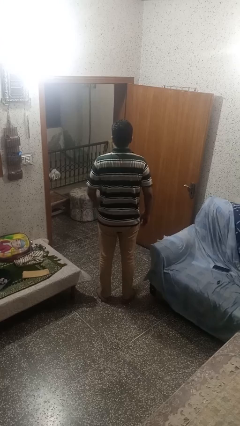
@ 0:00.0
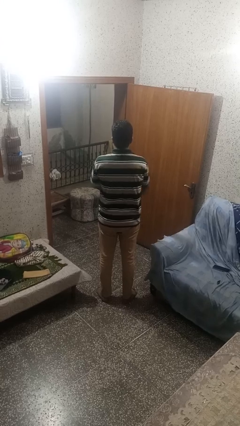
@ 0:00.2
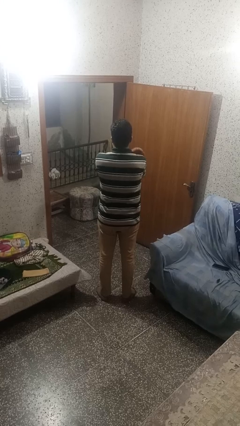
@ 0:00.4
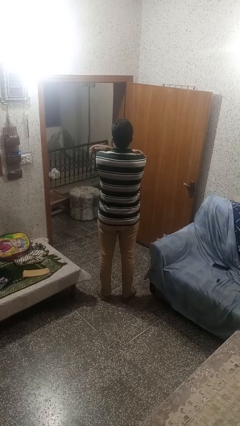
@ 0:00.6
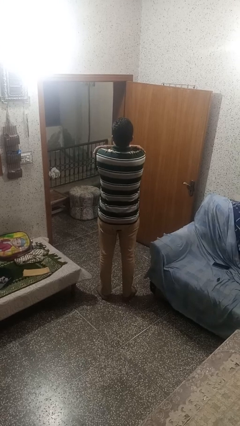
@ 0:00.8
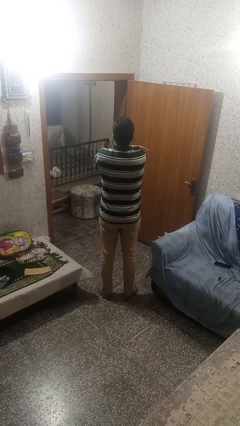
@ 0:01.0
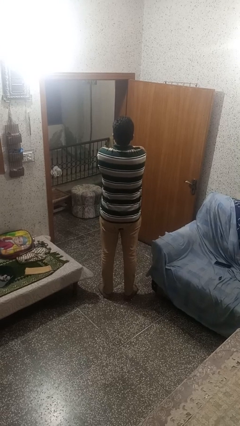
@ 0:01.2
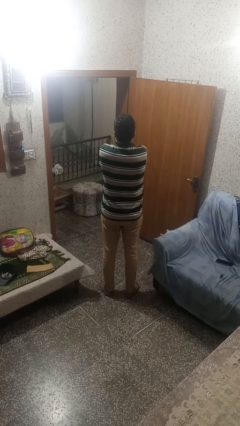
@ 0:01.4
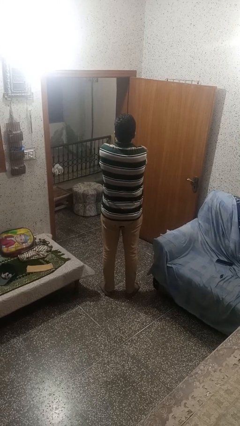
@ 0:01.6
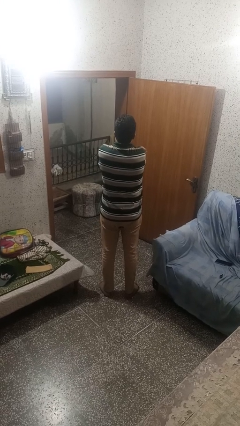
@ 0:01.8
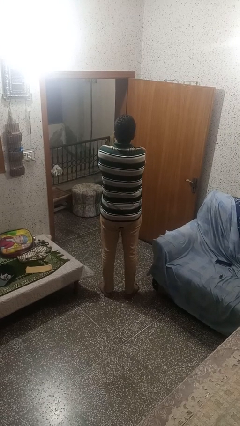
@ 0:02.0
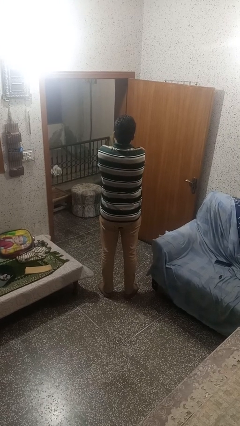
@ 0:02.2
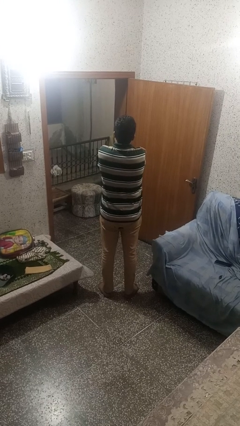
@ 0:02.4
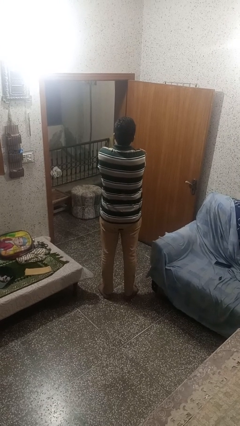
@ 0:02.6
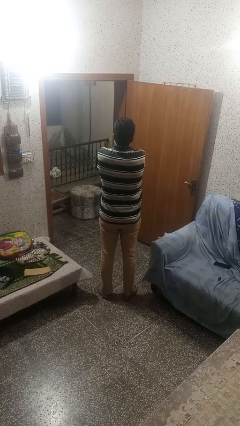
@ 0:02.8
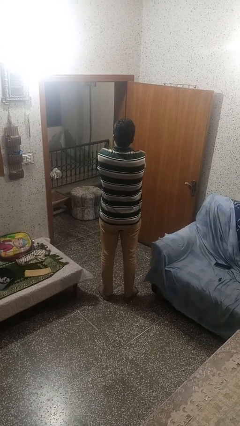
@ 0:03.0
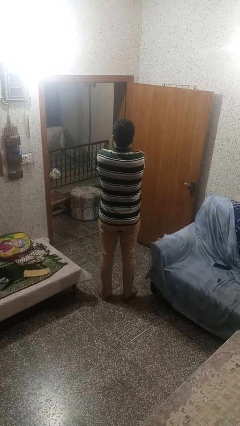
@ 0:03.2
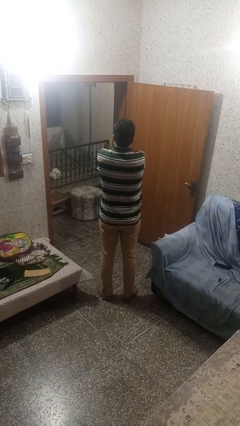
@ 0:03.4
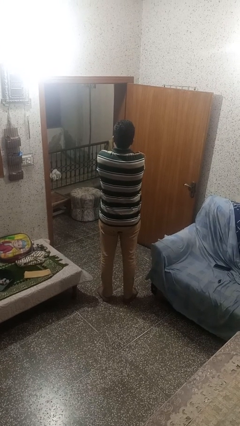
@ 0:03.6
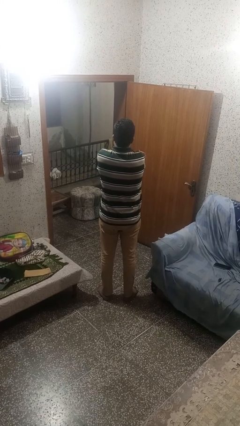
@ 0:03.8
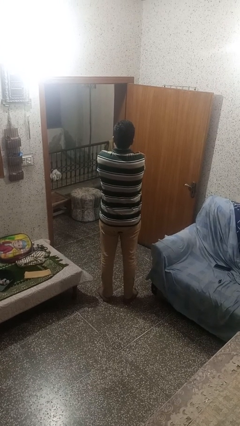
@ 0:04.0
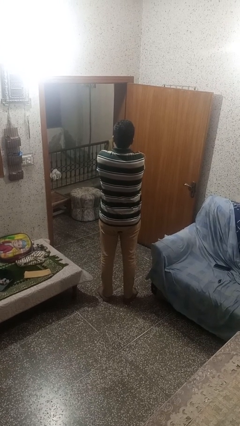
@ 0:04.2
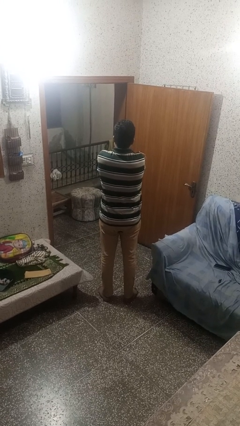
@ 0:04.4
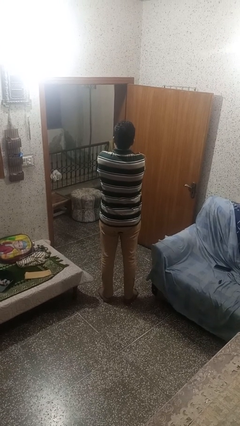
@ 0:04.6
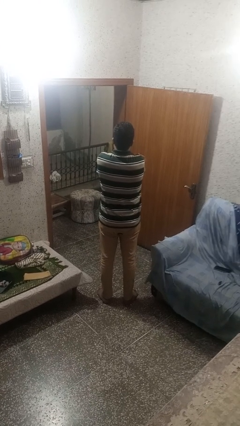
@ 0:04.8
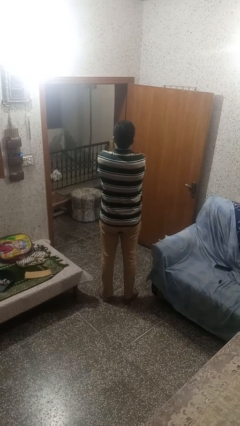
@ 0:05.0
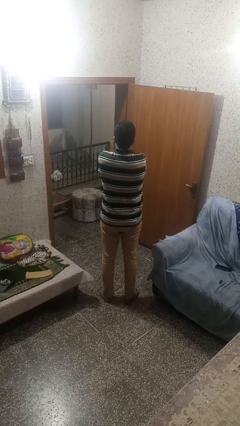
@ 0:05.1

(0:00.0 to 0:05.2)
person crosses arms

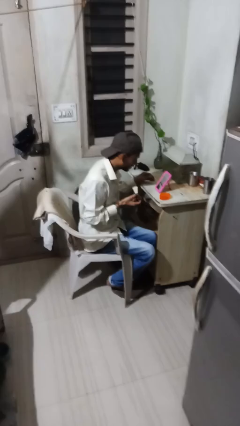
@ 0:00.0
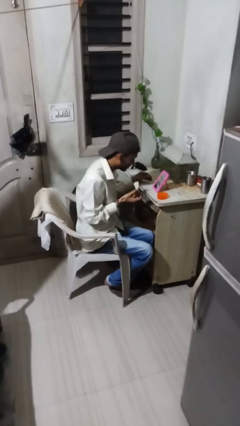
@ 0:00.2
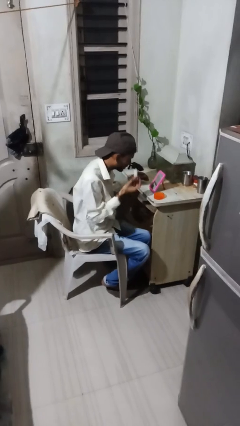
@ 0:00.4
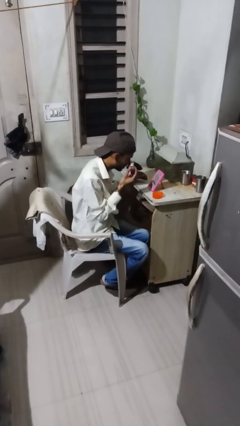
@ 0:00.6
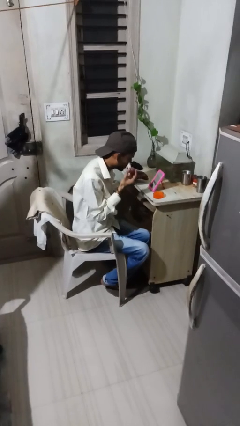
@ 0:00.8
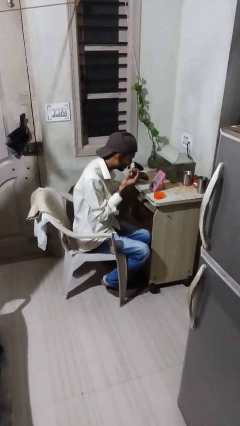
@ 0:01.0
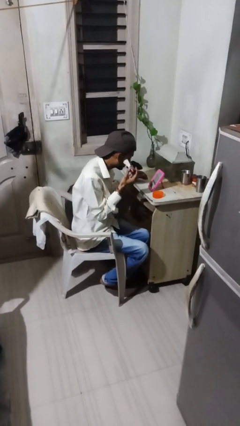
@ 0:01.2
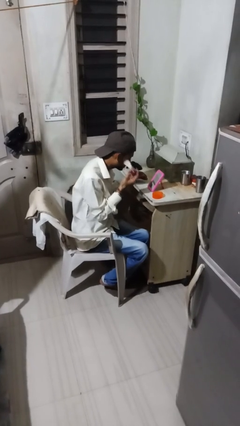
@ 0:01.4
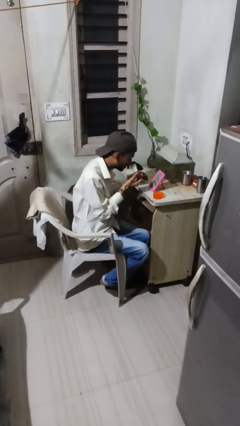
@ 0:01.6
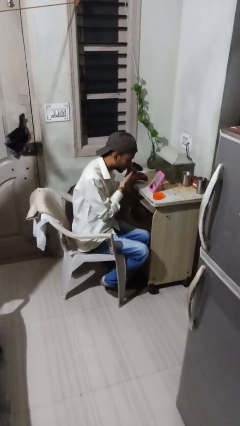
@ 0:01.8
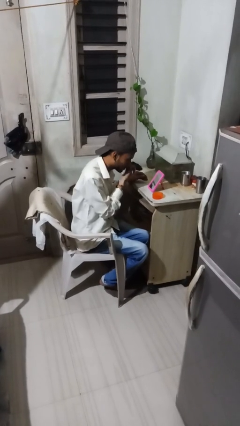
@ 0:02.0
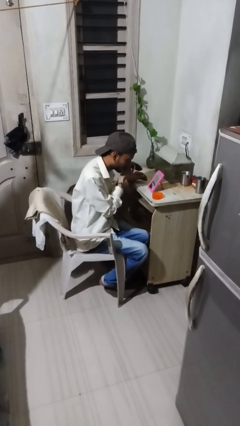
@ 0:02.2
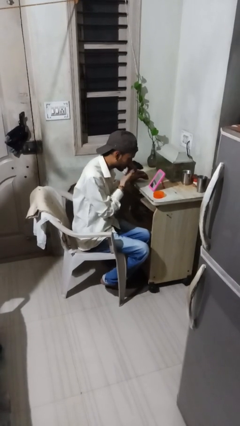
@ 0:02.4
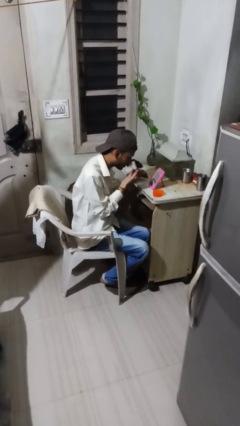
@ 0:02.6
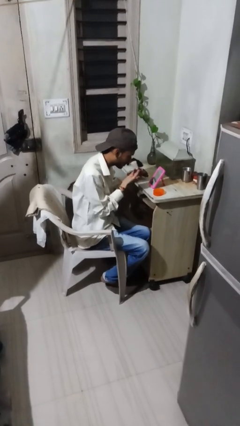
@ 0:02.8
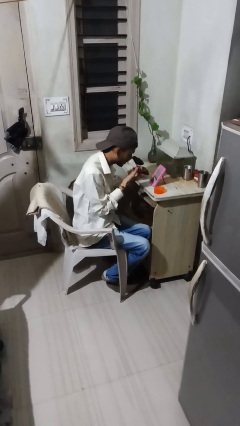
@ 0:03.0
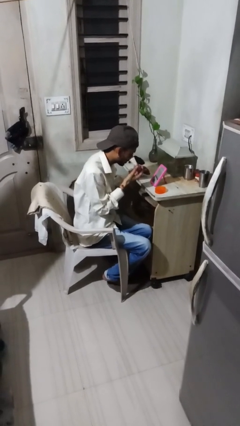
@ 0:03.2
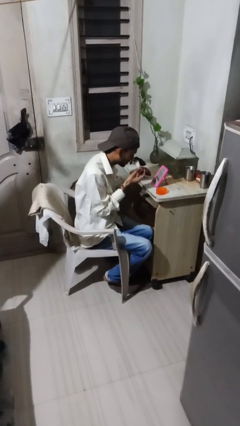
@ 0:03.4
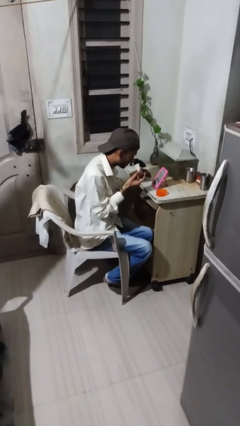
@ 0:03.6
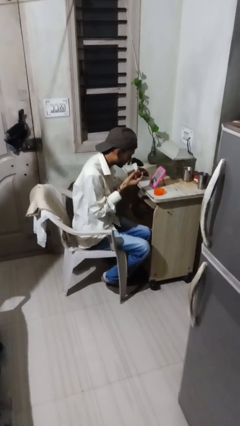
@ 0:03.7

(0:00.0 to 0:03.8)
person applies foundation makeup

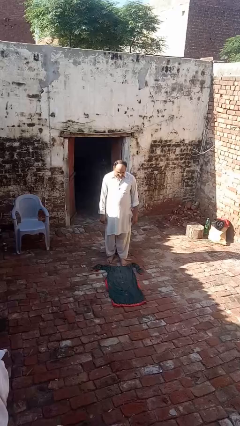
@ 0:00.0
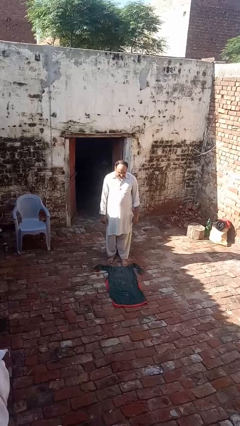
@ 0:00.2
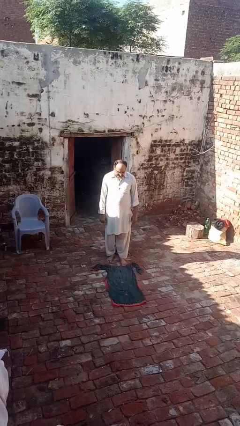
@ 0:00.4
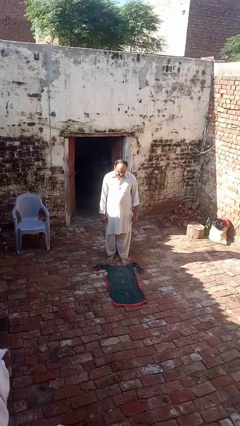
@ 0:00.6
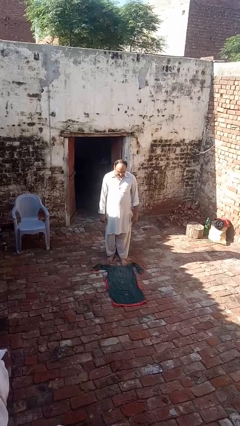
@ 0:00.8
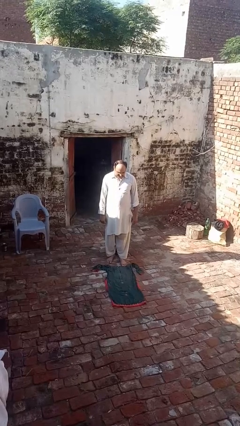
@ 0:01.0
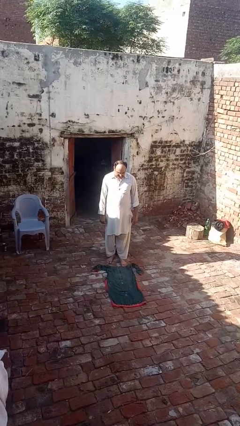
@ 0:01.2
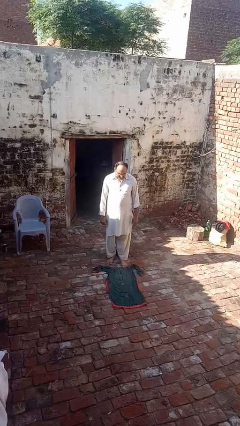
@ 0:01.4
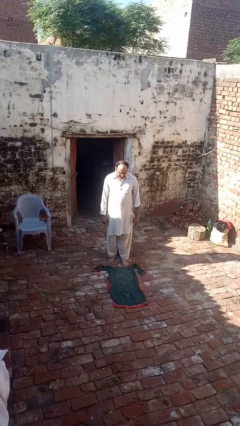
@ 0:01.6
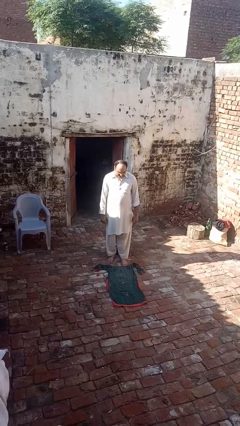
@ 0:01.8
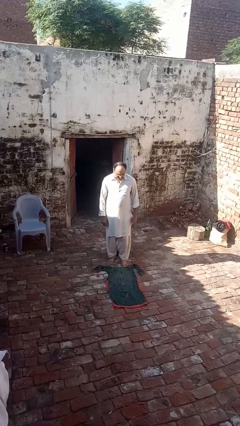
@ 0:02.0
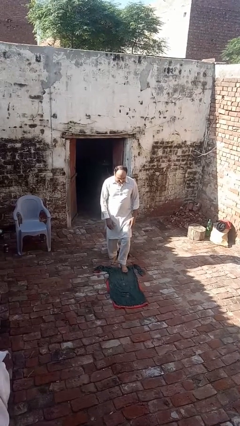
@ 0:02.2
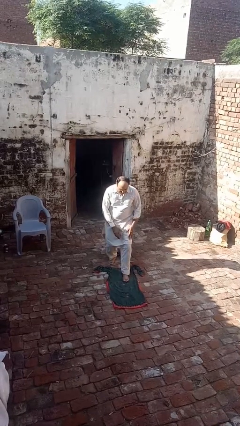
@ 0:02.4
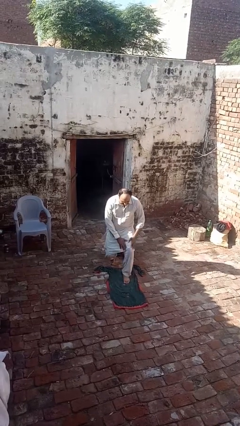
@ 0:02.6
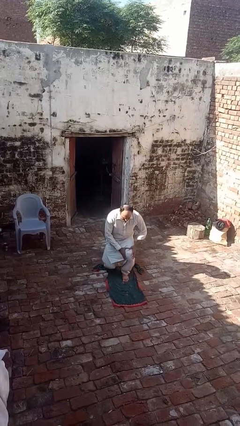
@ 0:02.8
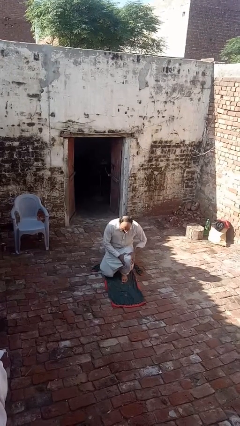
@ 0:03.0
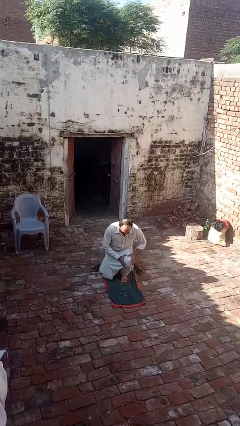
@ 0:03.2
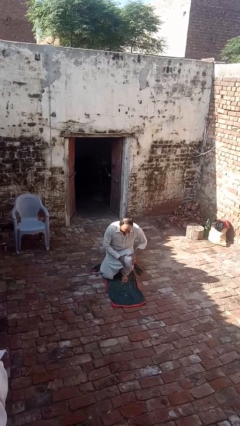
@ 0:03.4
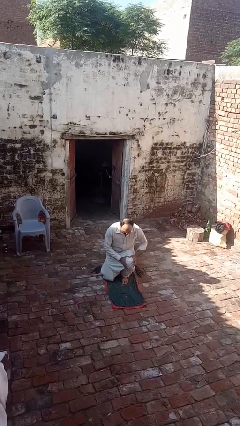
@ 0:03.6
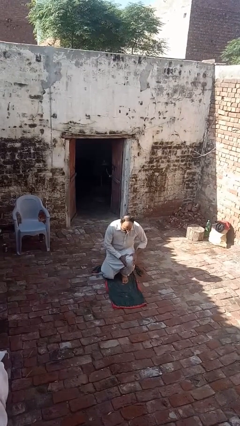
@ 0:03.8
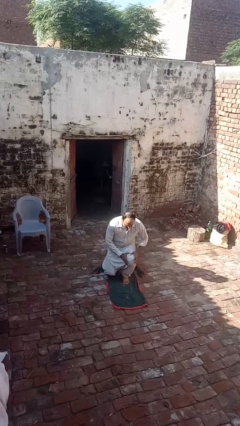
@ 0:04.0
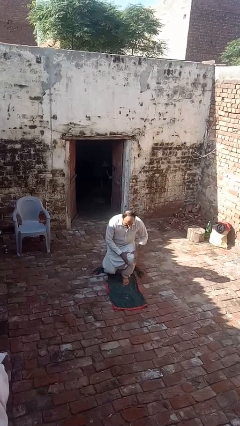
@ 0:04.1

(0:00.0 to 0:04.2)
person exercises with lunges

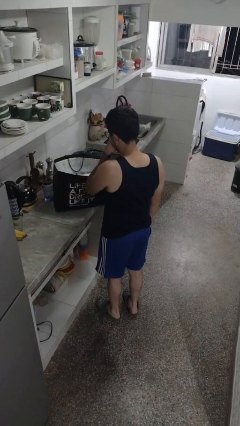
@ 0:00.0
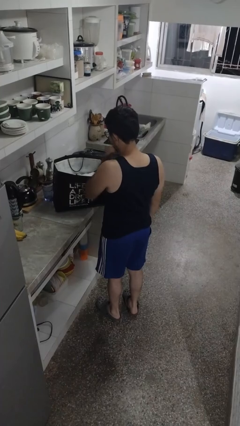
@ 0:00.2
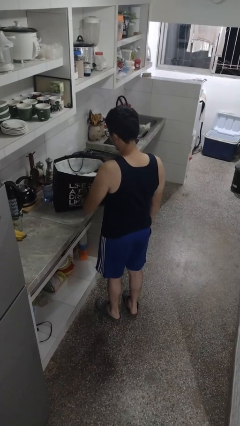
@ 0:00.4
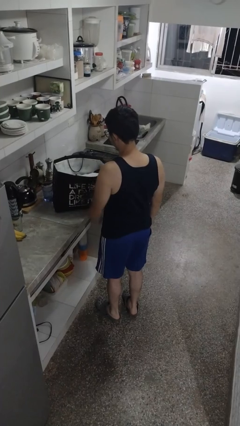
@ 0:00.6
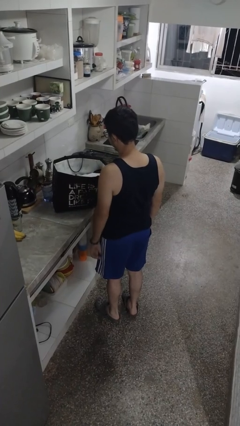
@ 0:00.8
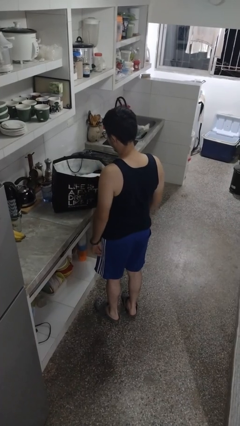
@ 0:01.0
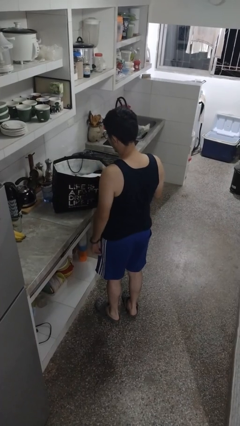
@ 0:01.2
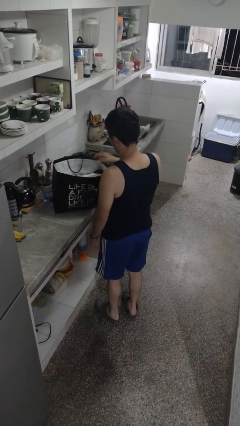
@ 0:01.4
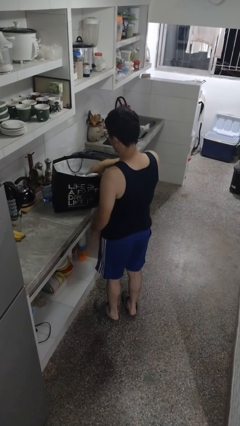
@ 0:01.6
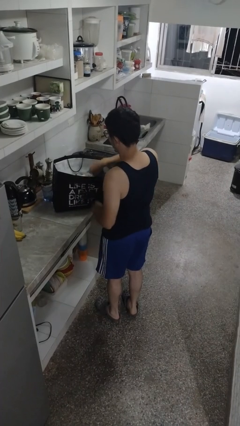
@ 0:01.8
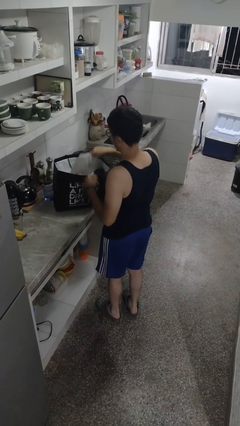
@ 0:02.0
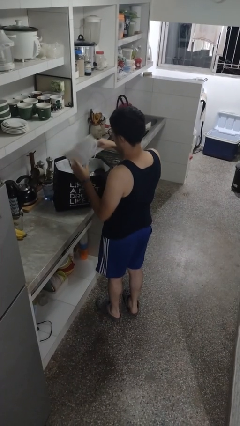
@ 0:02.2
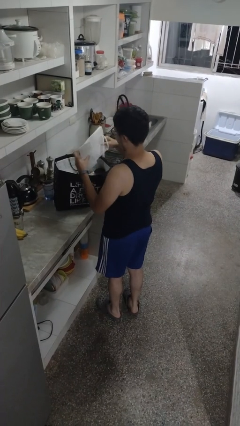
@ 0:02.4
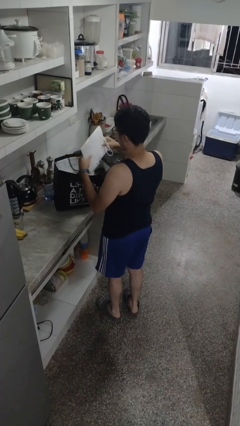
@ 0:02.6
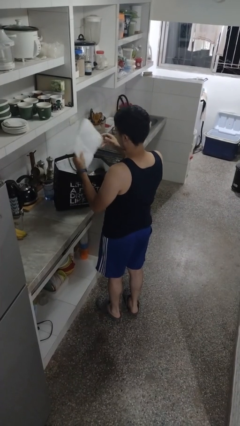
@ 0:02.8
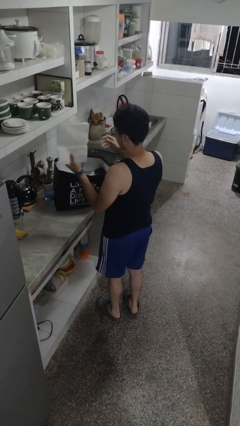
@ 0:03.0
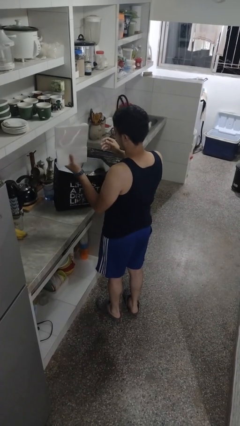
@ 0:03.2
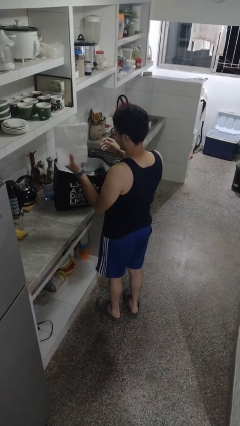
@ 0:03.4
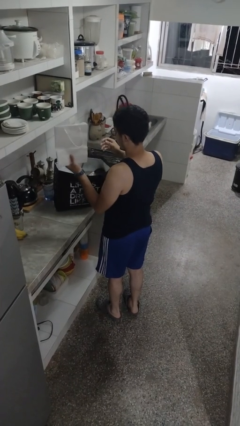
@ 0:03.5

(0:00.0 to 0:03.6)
person takes object from bag

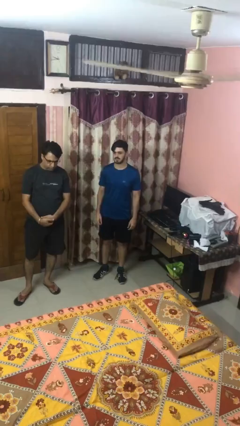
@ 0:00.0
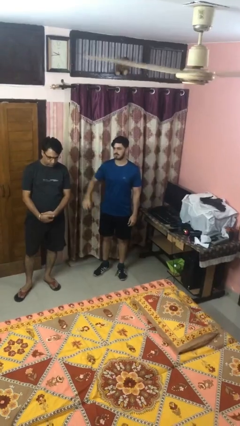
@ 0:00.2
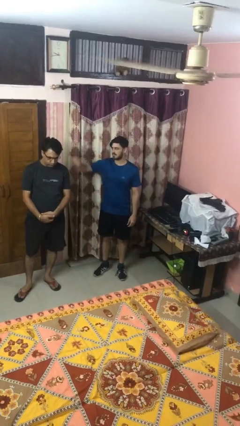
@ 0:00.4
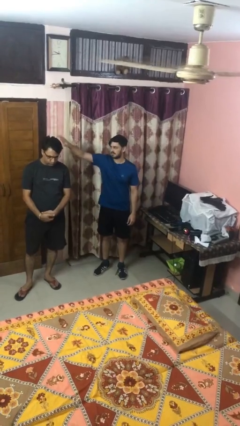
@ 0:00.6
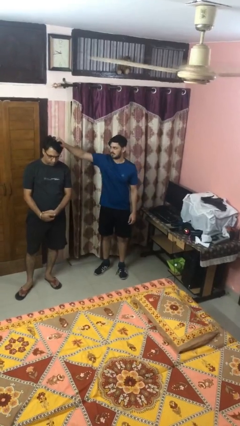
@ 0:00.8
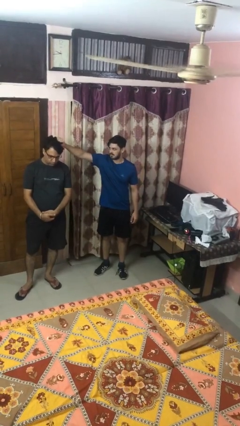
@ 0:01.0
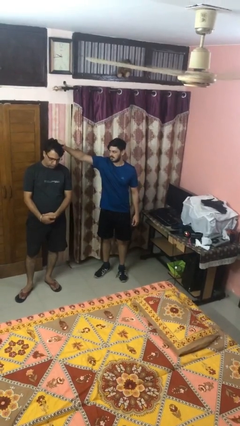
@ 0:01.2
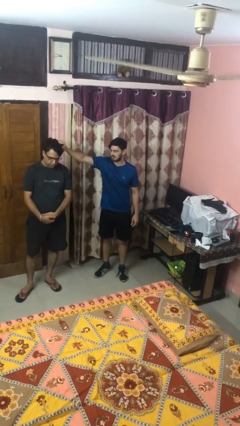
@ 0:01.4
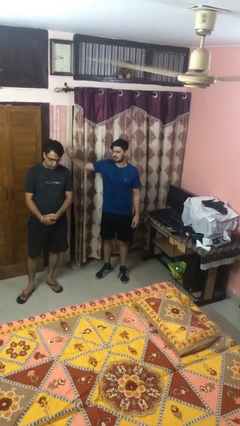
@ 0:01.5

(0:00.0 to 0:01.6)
person grabs person by hair
